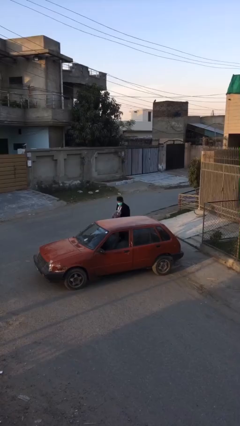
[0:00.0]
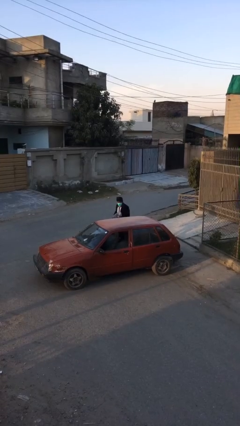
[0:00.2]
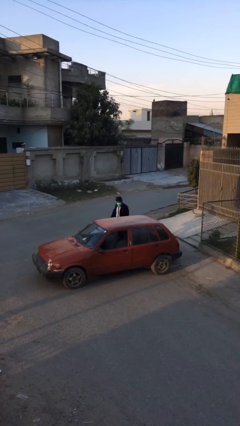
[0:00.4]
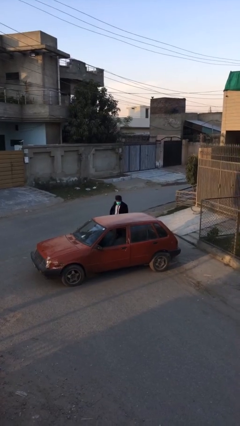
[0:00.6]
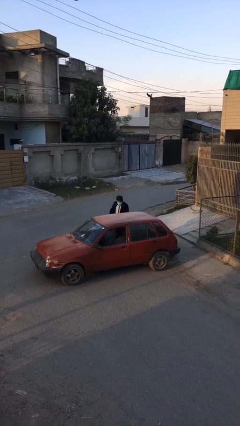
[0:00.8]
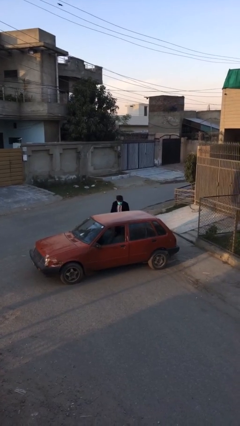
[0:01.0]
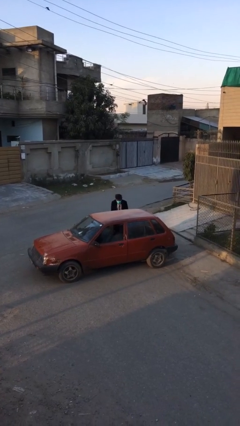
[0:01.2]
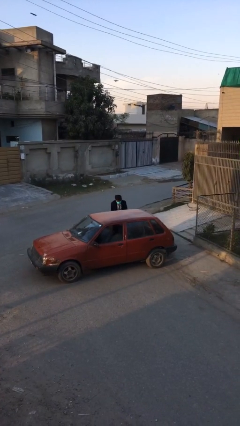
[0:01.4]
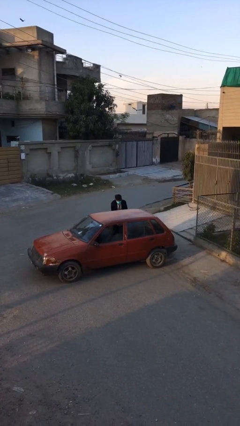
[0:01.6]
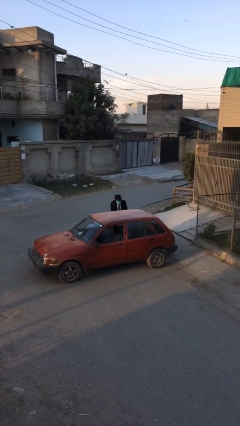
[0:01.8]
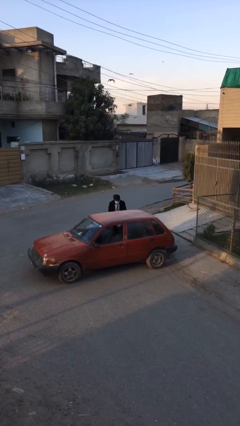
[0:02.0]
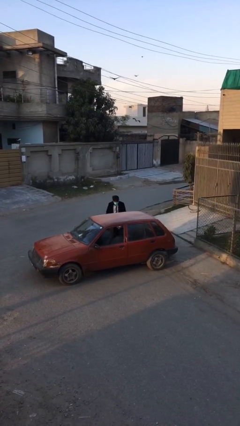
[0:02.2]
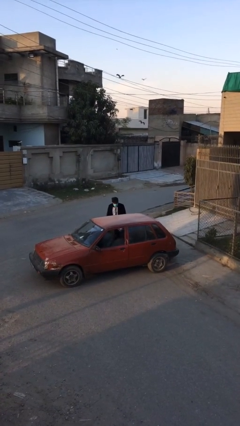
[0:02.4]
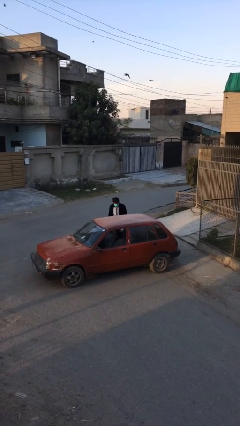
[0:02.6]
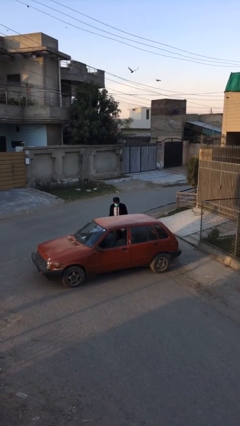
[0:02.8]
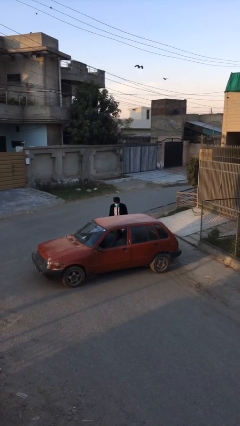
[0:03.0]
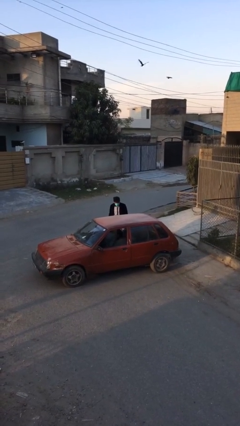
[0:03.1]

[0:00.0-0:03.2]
person loads car

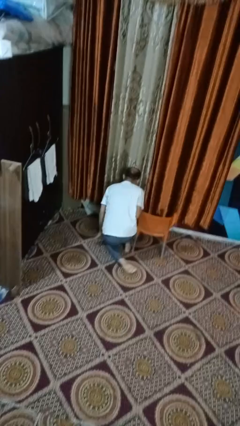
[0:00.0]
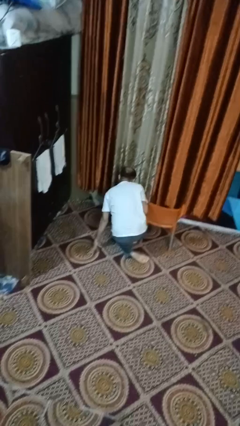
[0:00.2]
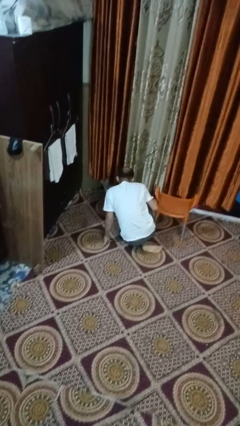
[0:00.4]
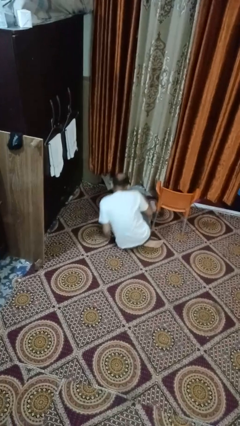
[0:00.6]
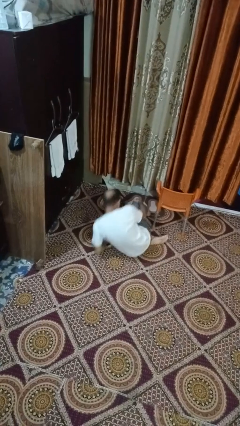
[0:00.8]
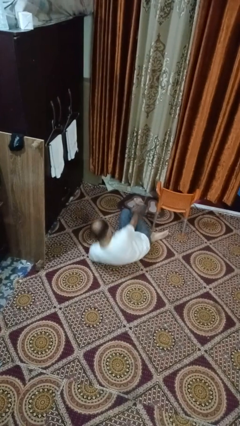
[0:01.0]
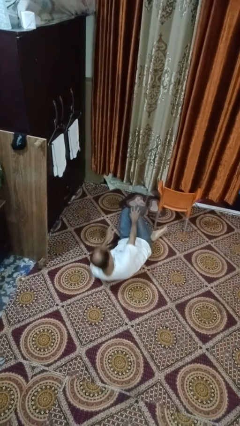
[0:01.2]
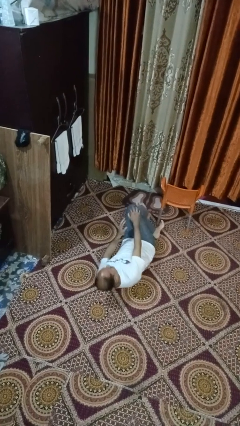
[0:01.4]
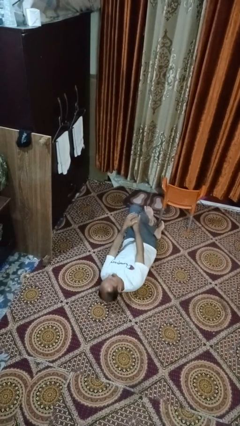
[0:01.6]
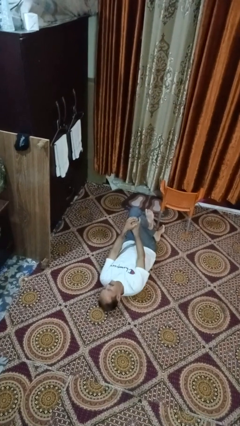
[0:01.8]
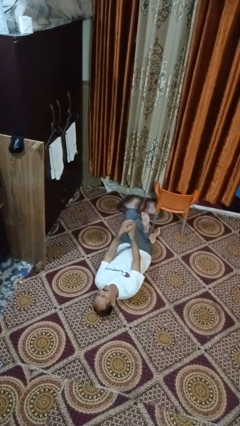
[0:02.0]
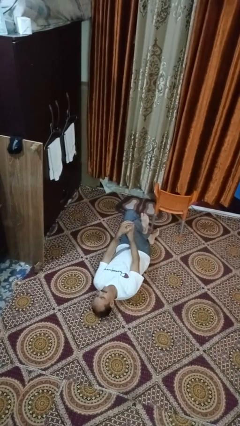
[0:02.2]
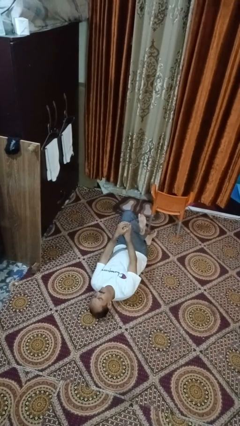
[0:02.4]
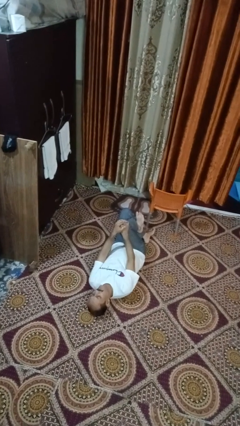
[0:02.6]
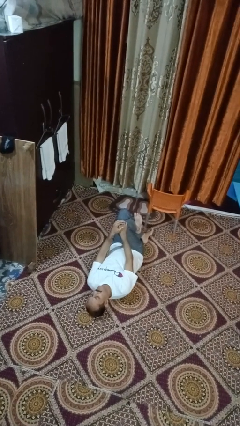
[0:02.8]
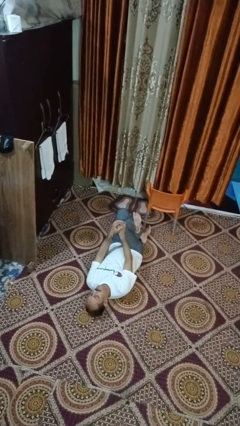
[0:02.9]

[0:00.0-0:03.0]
person lies down on floor

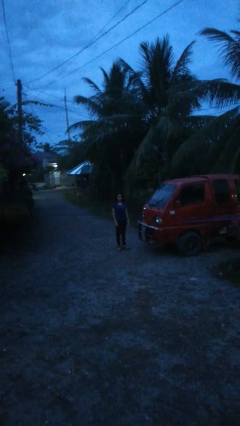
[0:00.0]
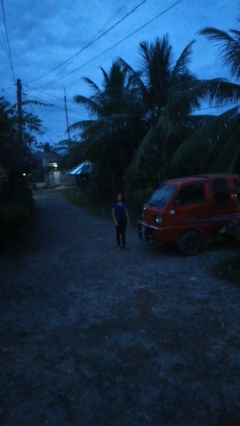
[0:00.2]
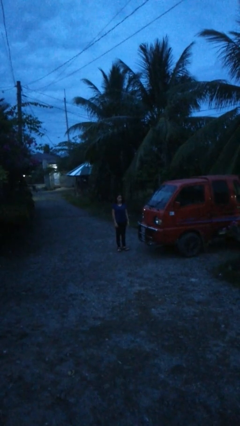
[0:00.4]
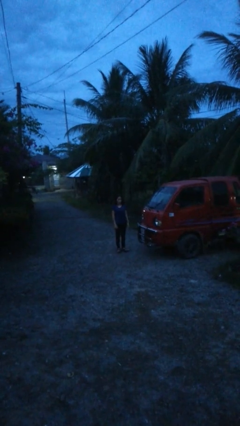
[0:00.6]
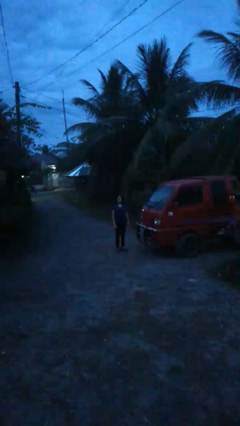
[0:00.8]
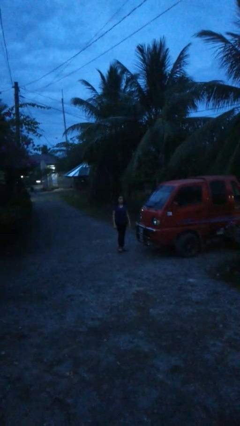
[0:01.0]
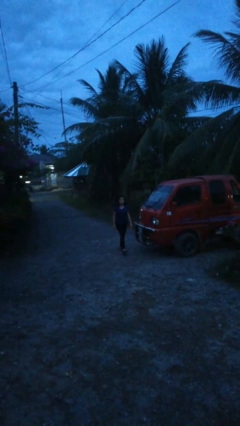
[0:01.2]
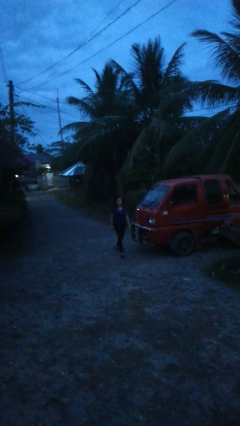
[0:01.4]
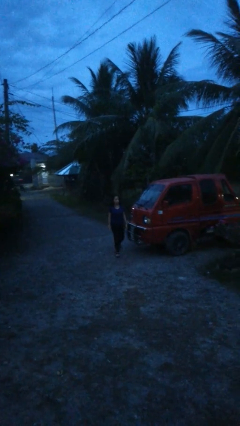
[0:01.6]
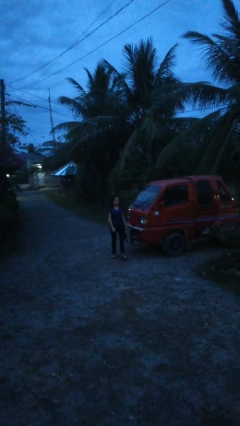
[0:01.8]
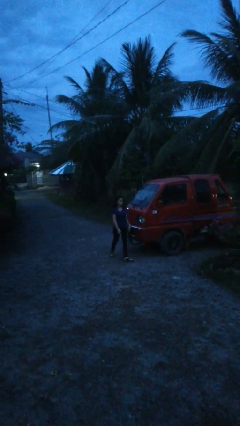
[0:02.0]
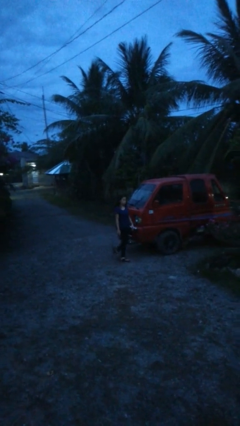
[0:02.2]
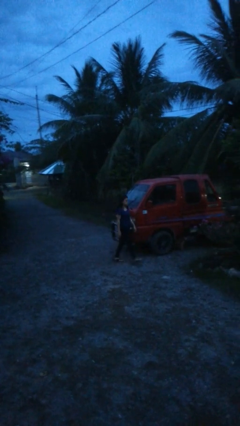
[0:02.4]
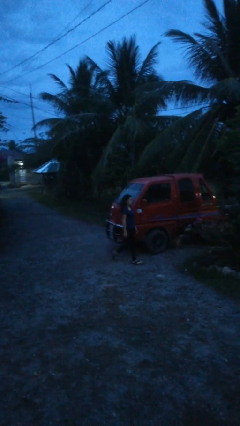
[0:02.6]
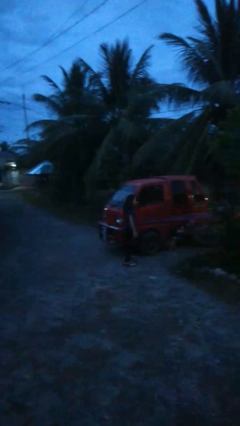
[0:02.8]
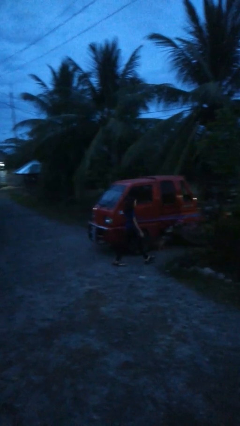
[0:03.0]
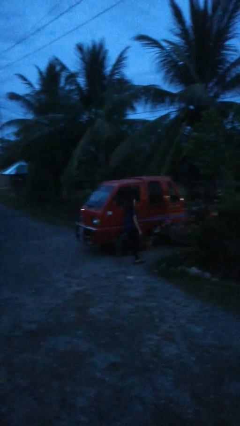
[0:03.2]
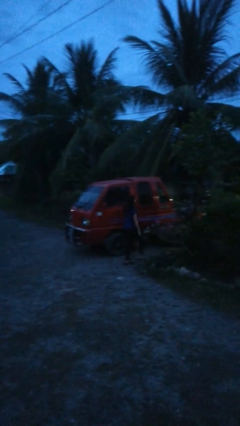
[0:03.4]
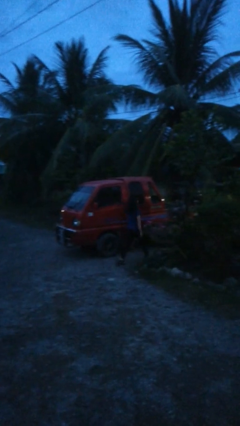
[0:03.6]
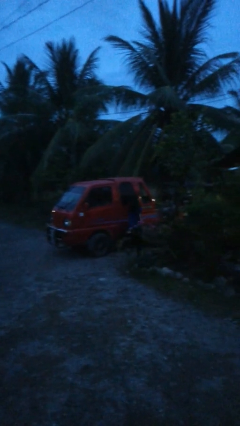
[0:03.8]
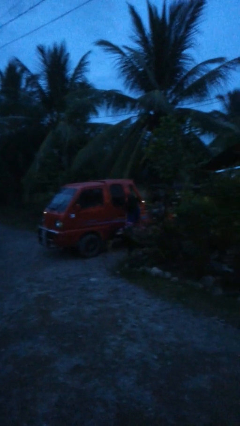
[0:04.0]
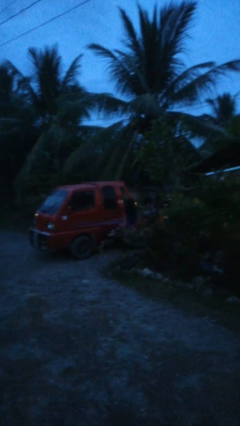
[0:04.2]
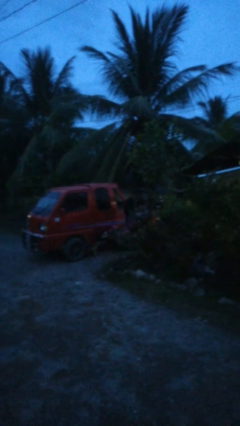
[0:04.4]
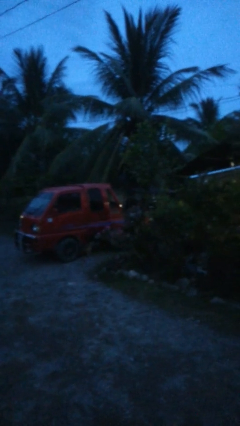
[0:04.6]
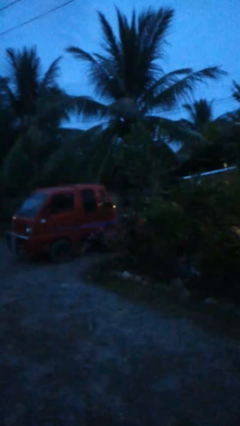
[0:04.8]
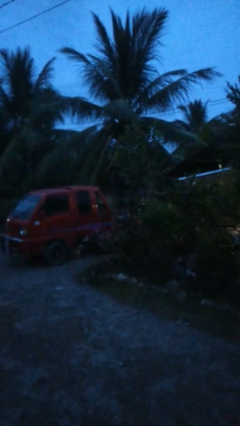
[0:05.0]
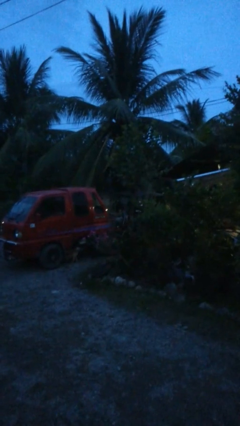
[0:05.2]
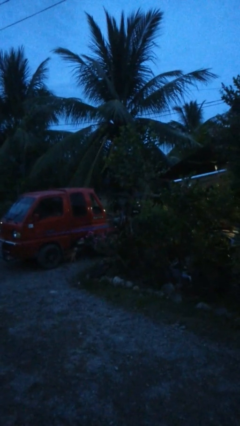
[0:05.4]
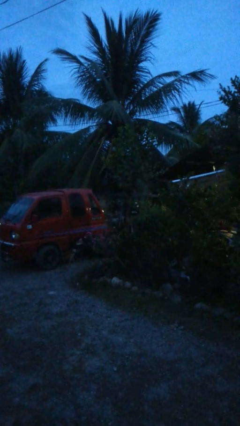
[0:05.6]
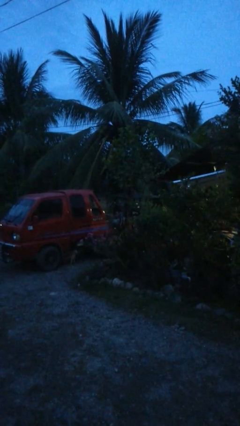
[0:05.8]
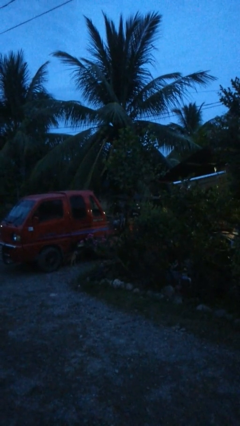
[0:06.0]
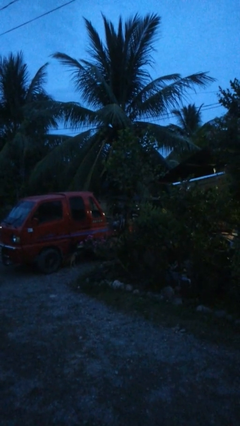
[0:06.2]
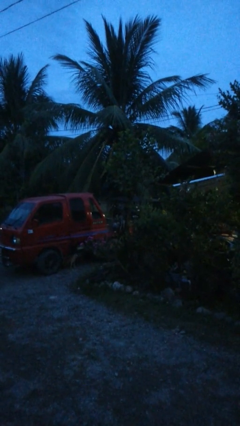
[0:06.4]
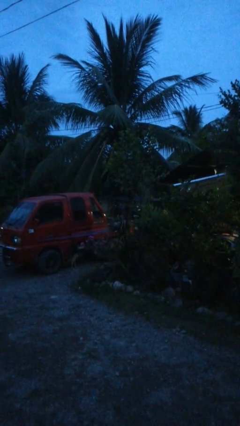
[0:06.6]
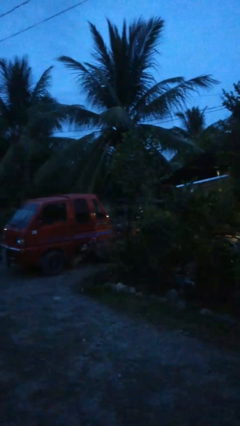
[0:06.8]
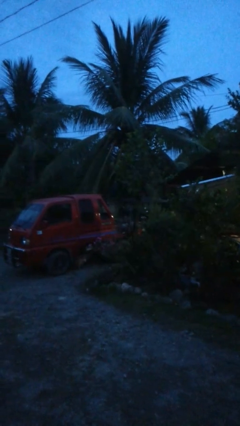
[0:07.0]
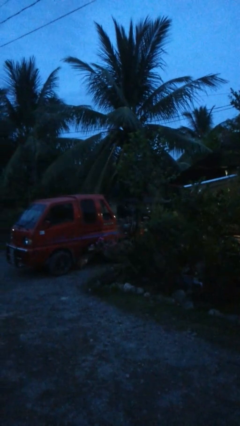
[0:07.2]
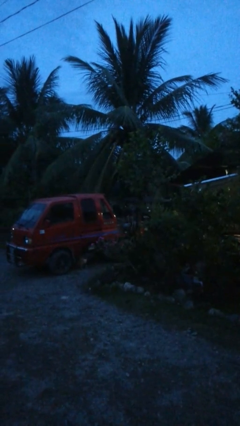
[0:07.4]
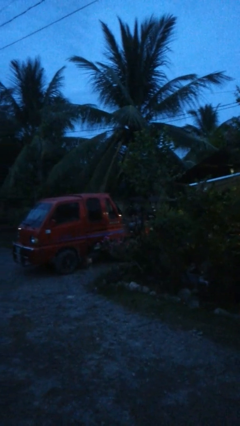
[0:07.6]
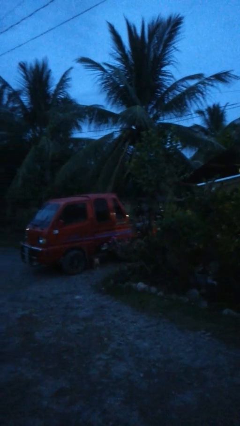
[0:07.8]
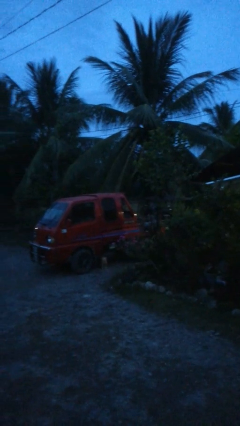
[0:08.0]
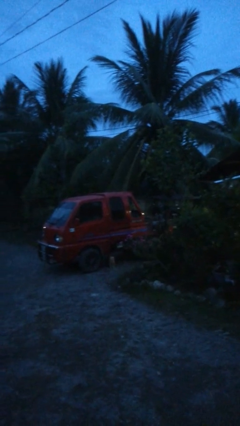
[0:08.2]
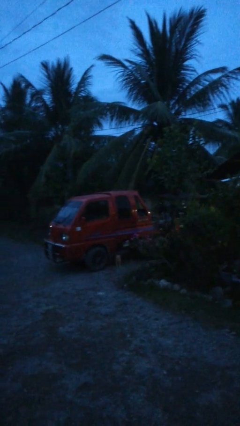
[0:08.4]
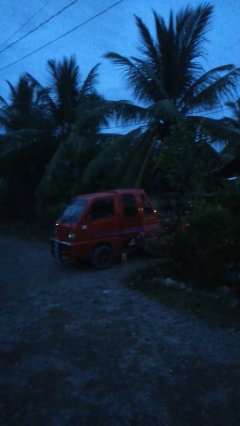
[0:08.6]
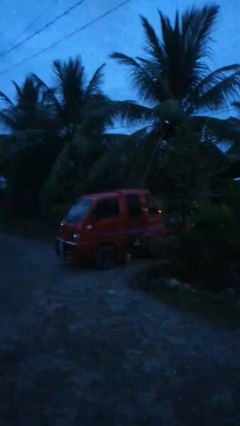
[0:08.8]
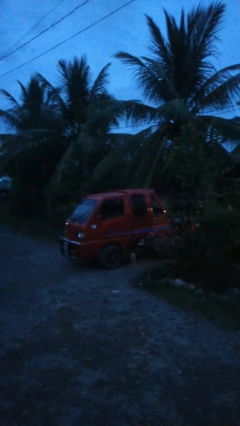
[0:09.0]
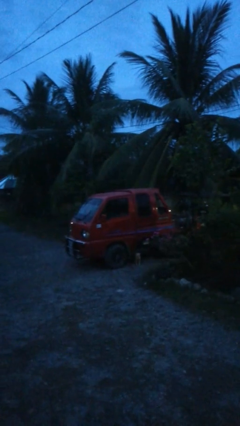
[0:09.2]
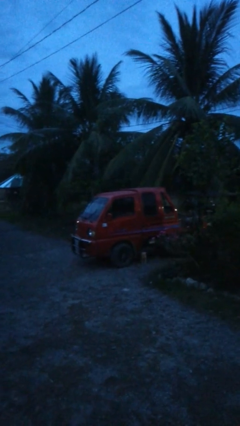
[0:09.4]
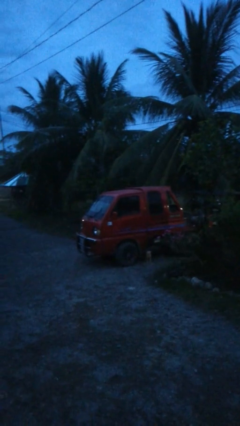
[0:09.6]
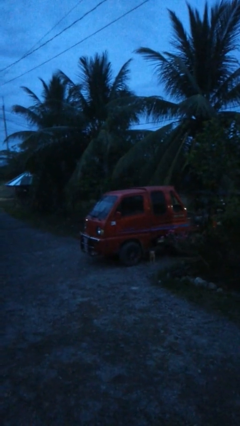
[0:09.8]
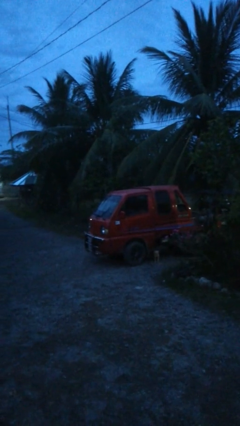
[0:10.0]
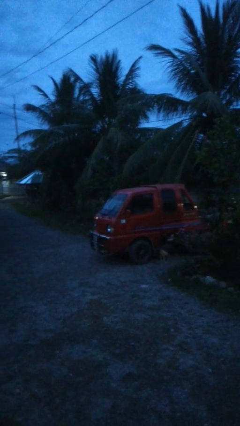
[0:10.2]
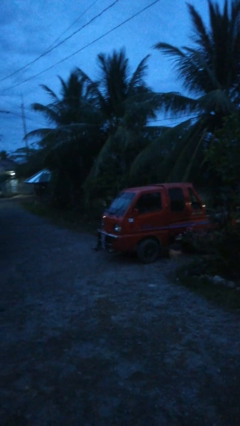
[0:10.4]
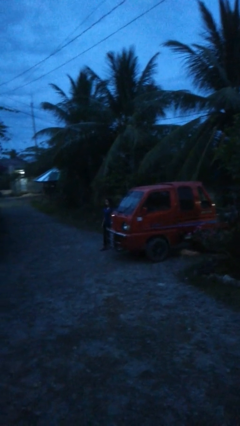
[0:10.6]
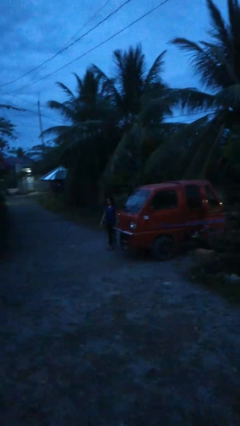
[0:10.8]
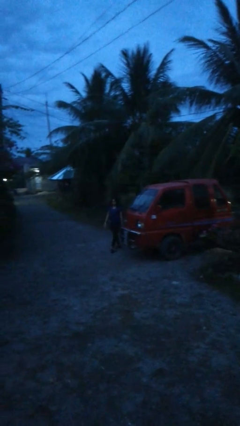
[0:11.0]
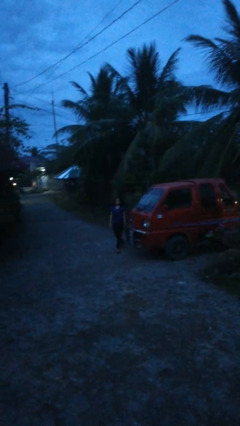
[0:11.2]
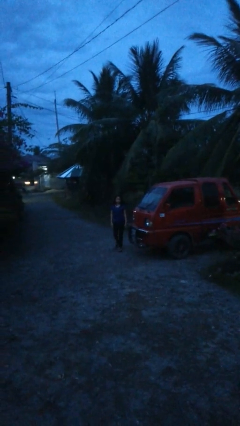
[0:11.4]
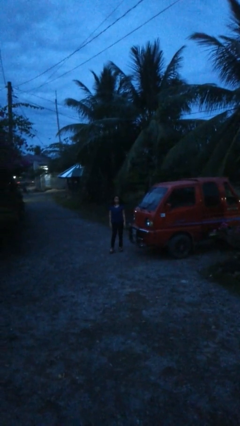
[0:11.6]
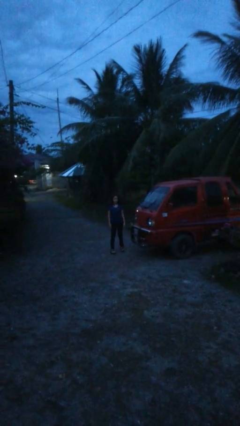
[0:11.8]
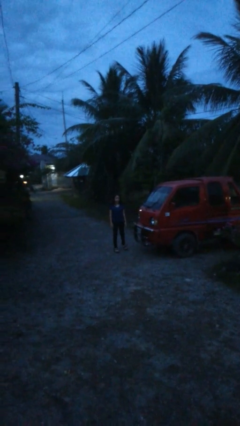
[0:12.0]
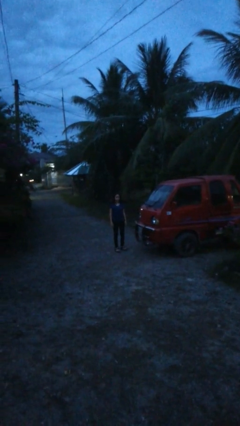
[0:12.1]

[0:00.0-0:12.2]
person walks around car
